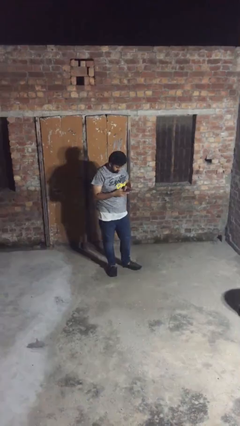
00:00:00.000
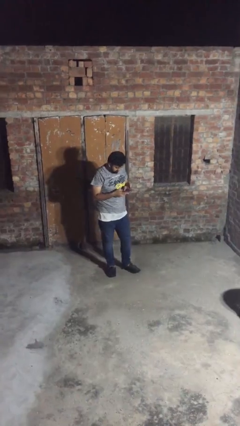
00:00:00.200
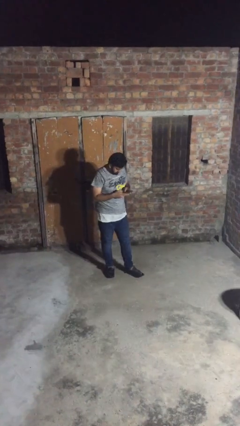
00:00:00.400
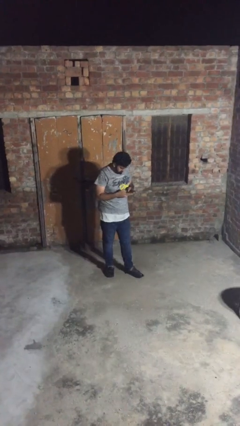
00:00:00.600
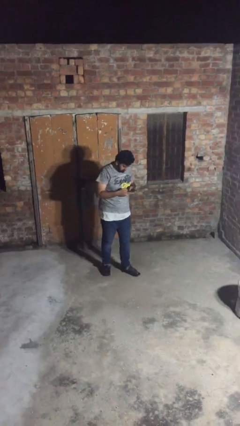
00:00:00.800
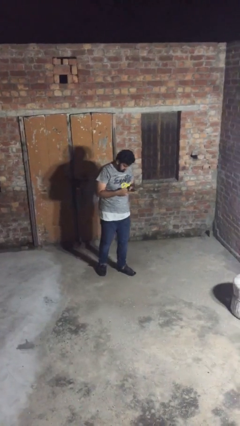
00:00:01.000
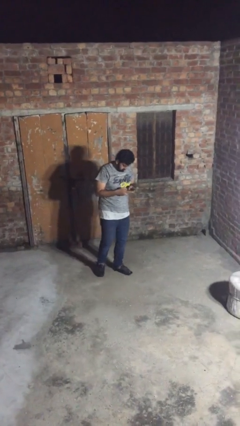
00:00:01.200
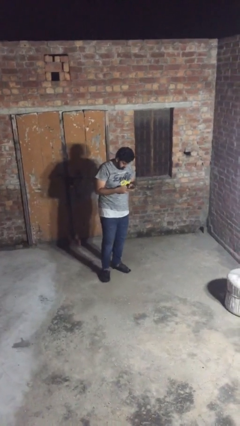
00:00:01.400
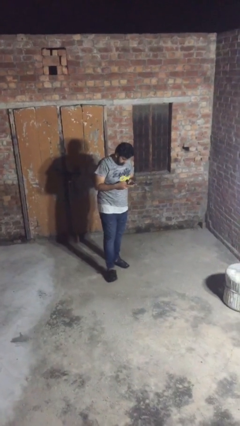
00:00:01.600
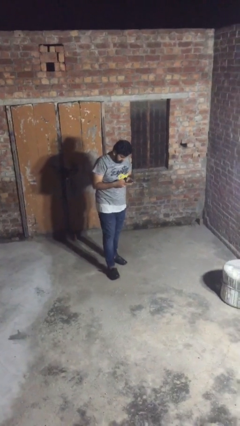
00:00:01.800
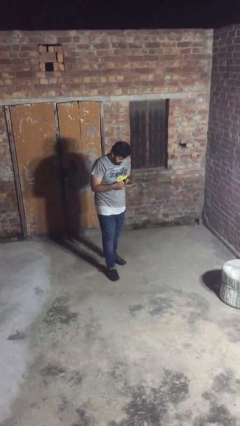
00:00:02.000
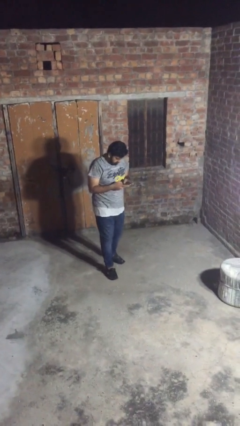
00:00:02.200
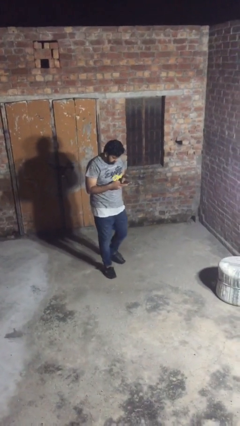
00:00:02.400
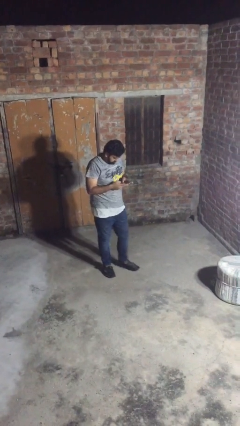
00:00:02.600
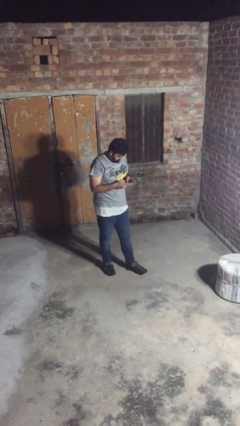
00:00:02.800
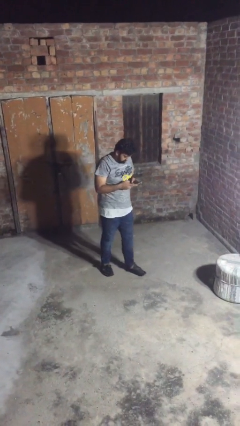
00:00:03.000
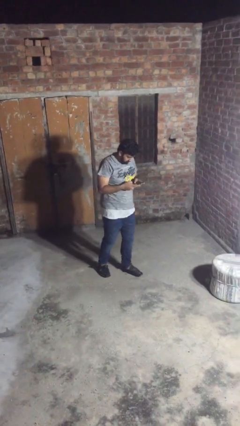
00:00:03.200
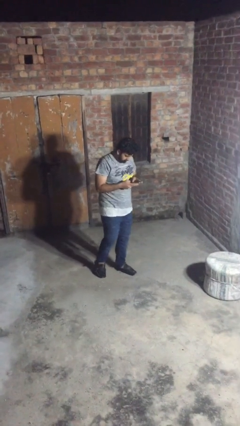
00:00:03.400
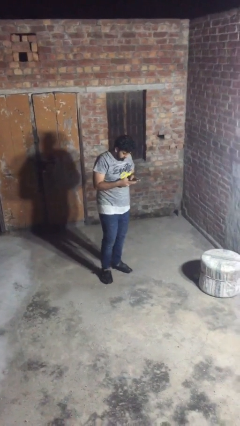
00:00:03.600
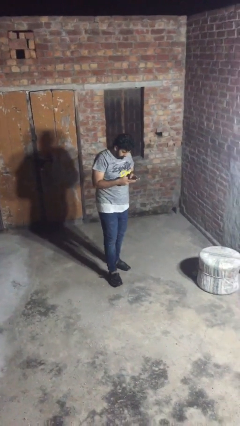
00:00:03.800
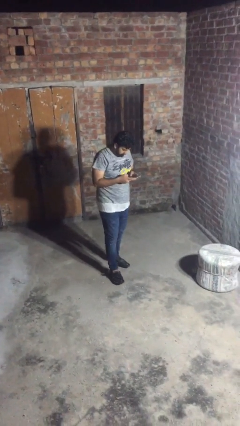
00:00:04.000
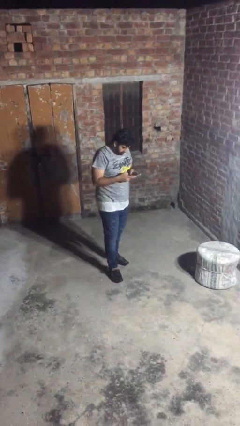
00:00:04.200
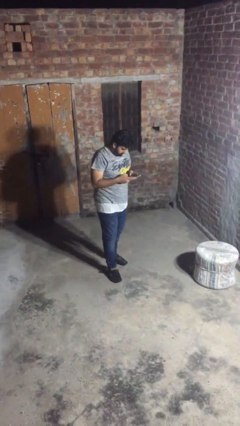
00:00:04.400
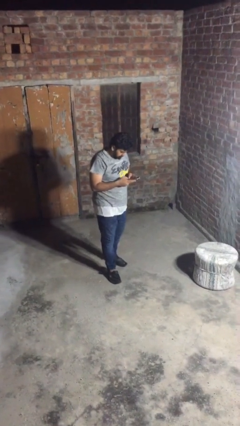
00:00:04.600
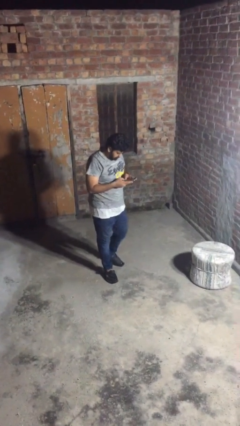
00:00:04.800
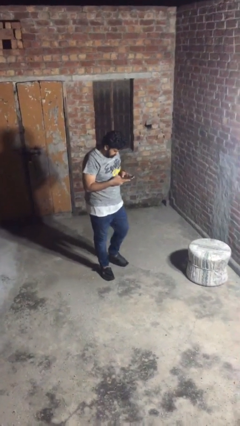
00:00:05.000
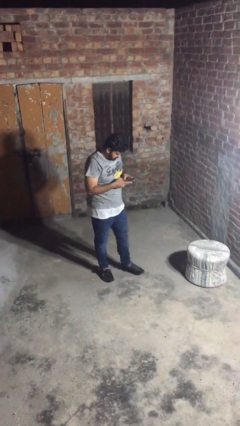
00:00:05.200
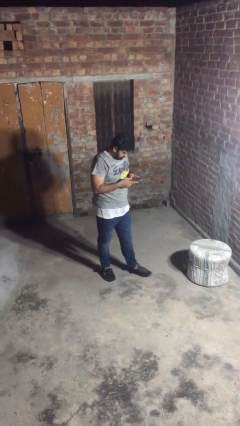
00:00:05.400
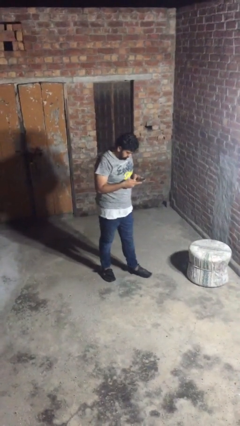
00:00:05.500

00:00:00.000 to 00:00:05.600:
person texts on phone

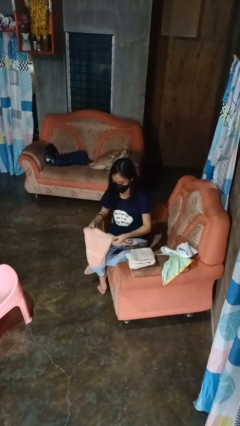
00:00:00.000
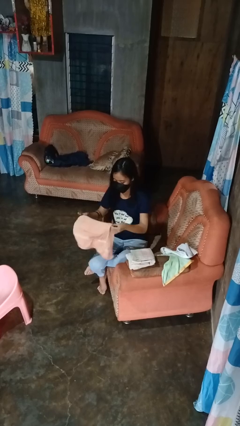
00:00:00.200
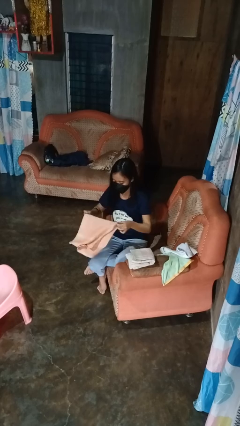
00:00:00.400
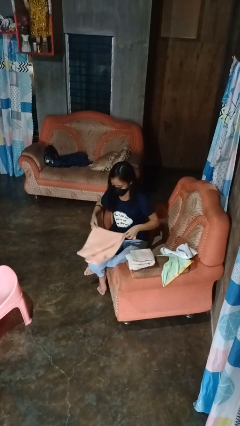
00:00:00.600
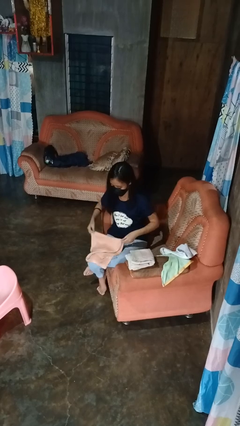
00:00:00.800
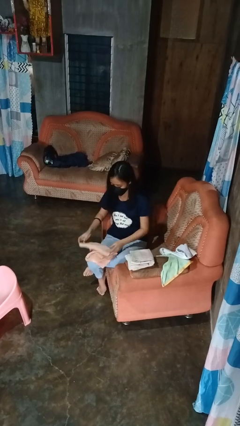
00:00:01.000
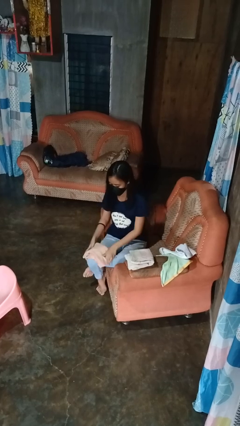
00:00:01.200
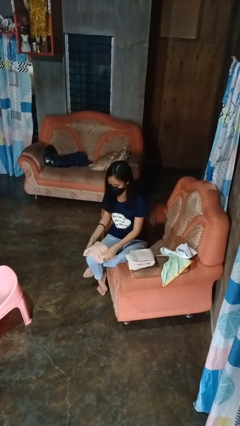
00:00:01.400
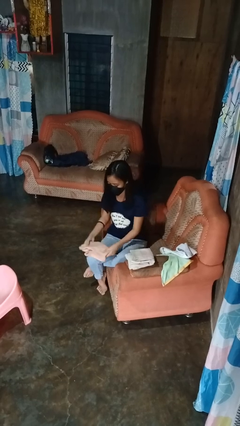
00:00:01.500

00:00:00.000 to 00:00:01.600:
person folds towel

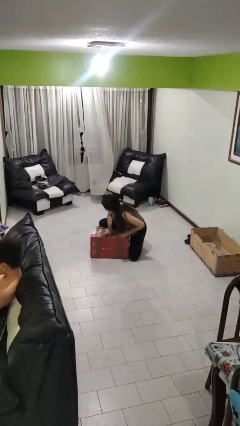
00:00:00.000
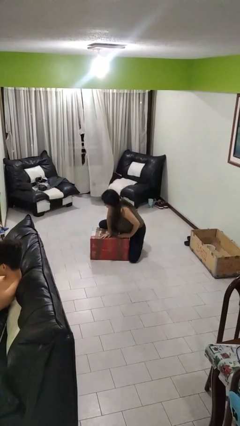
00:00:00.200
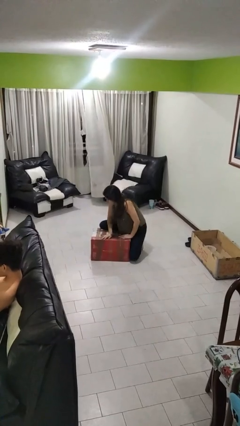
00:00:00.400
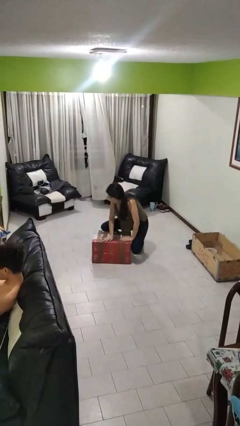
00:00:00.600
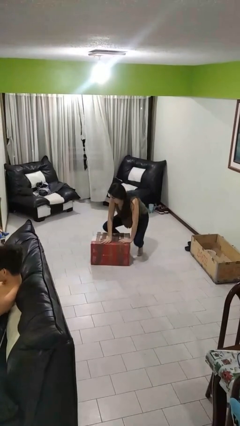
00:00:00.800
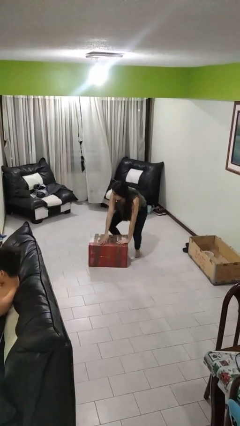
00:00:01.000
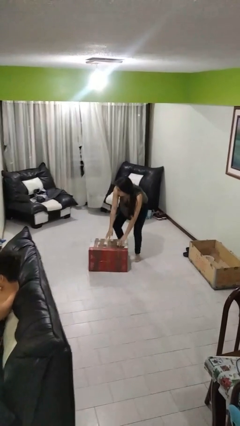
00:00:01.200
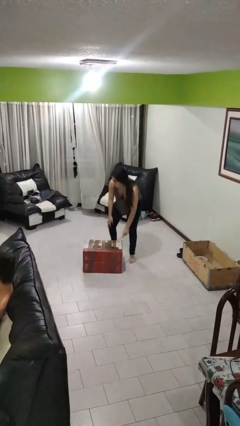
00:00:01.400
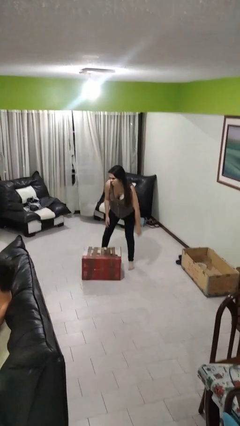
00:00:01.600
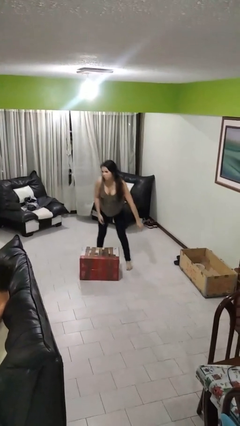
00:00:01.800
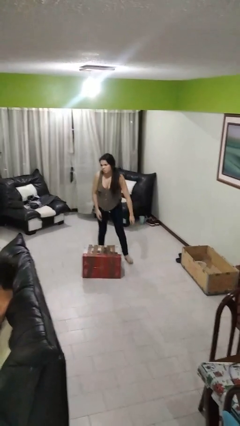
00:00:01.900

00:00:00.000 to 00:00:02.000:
person stands up from floor

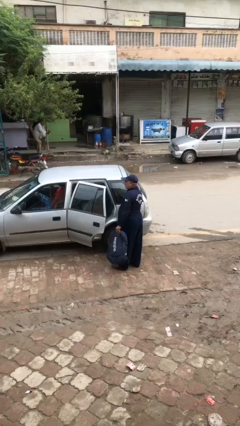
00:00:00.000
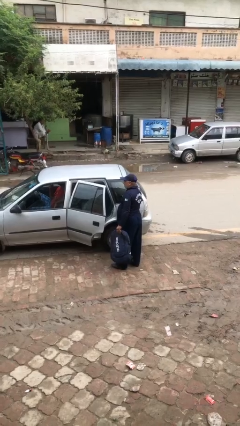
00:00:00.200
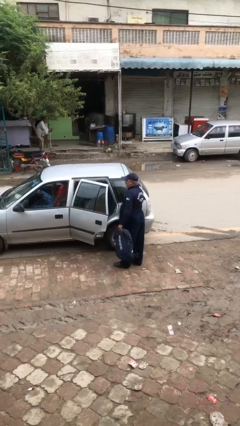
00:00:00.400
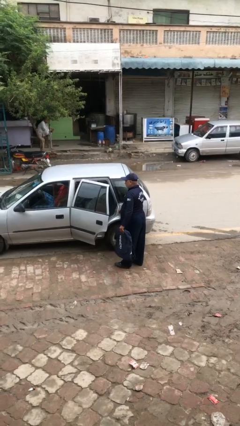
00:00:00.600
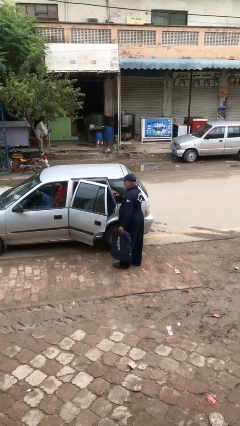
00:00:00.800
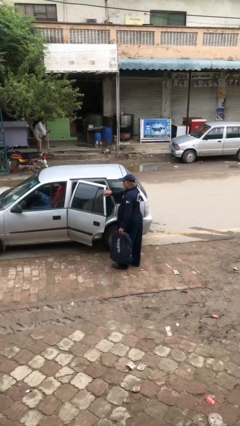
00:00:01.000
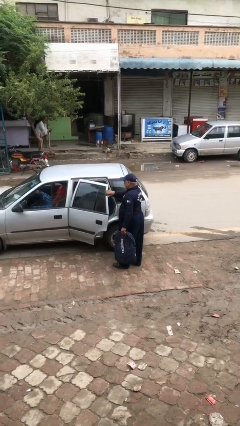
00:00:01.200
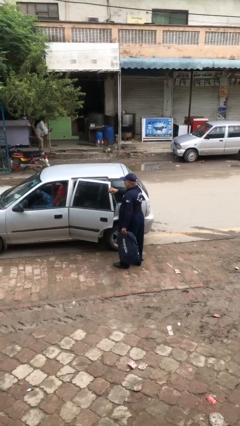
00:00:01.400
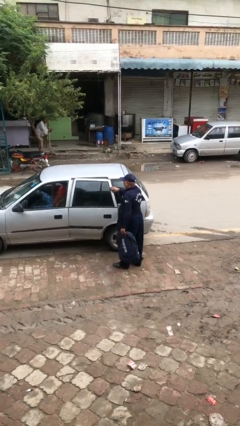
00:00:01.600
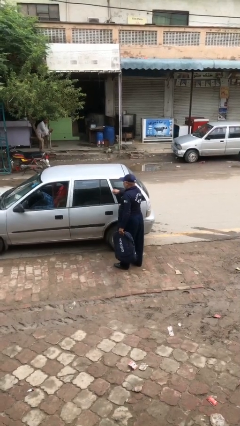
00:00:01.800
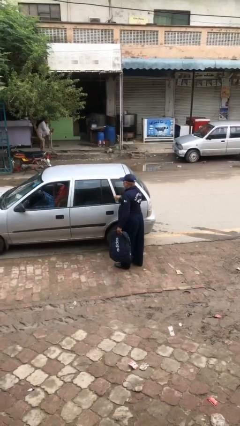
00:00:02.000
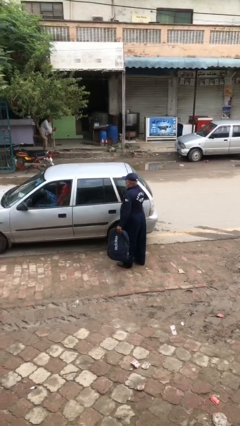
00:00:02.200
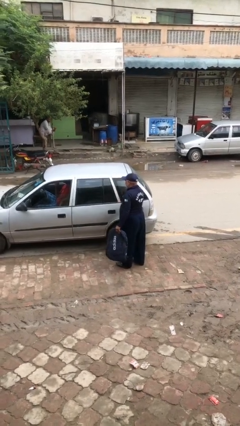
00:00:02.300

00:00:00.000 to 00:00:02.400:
person closes car door

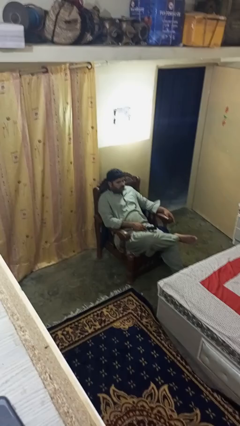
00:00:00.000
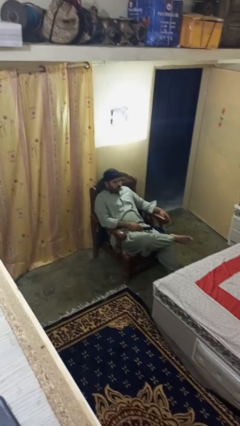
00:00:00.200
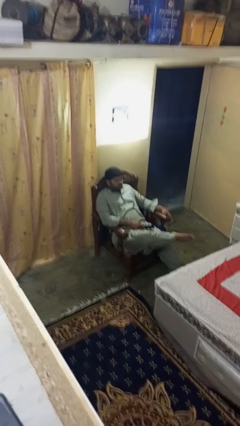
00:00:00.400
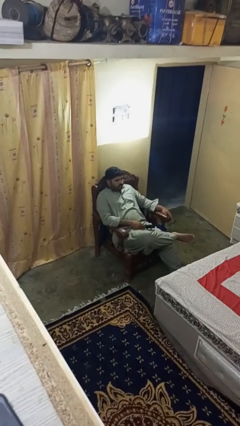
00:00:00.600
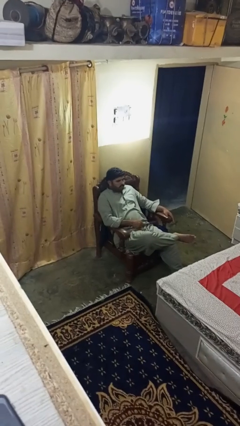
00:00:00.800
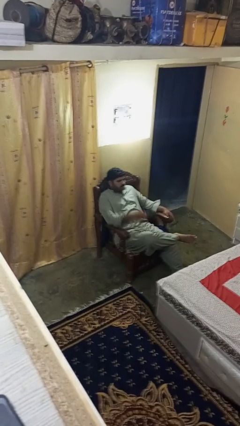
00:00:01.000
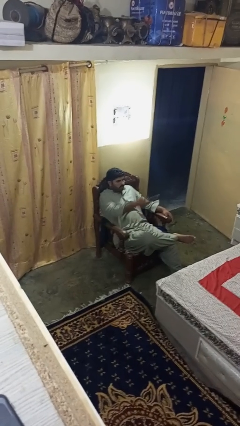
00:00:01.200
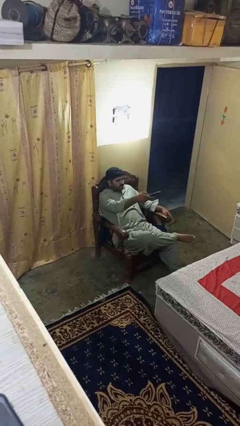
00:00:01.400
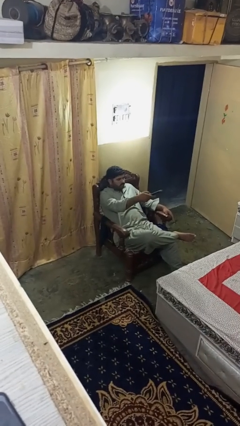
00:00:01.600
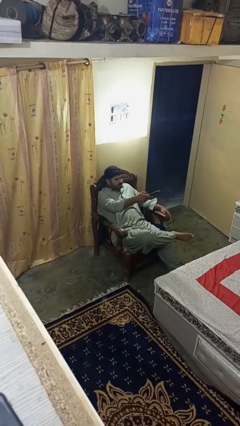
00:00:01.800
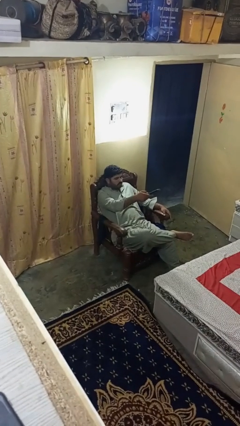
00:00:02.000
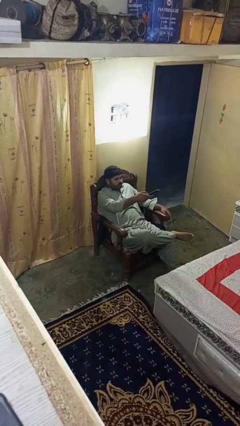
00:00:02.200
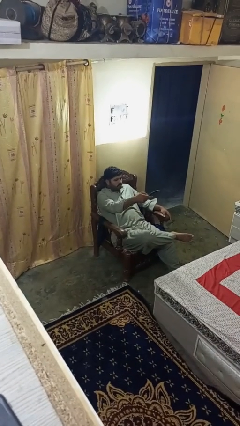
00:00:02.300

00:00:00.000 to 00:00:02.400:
person uses television remote

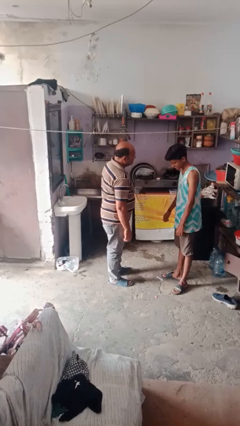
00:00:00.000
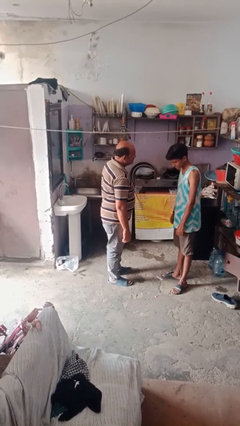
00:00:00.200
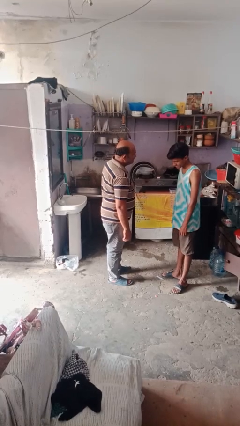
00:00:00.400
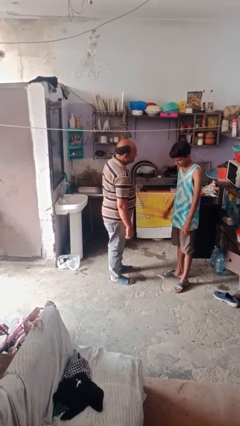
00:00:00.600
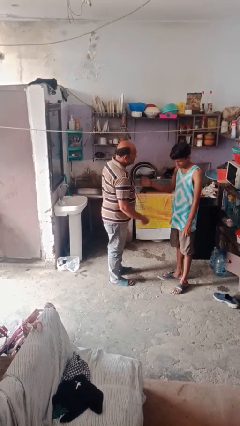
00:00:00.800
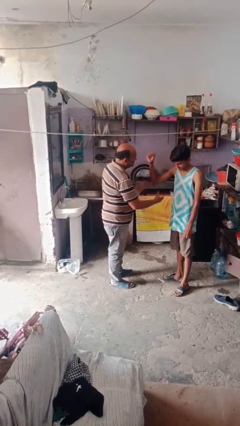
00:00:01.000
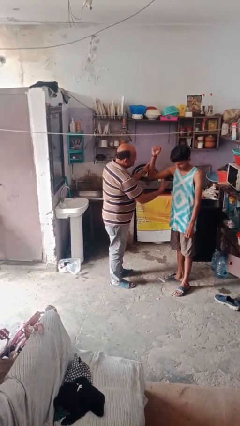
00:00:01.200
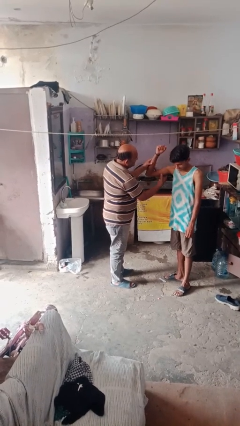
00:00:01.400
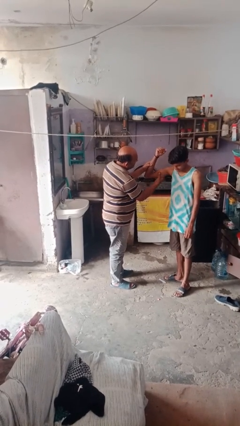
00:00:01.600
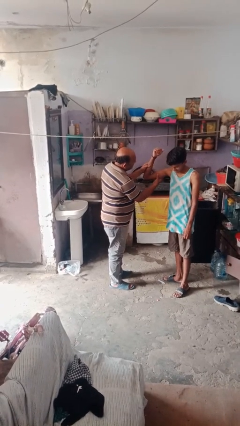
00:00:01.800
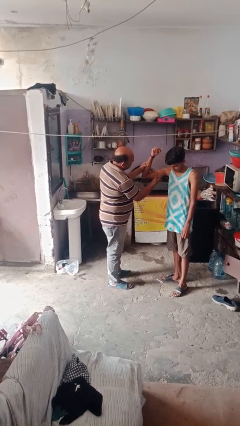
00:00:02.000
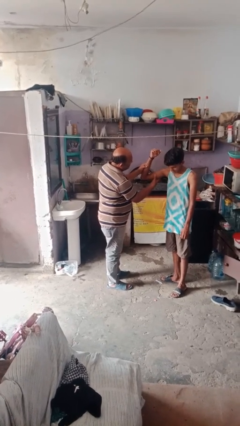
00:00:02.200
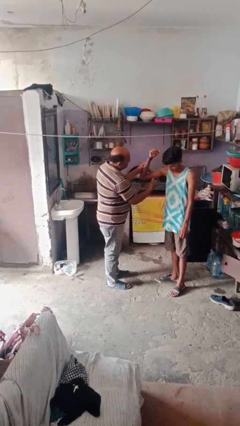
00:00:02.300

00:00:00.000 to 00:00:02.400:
person grabs person by bicep

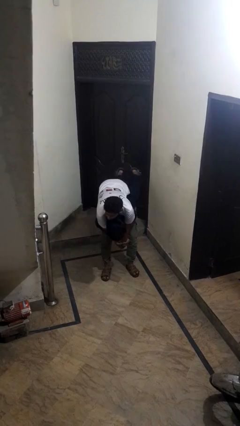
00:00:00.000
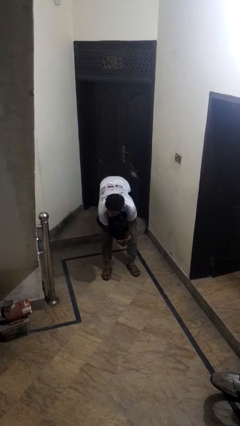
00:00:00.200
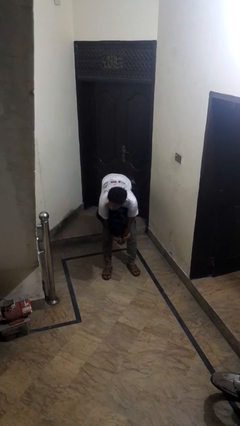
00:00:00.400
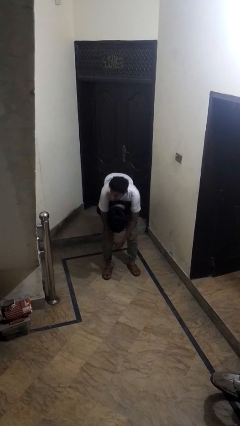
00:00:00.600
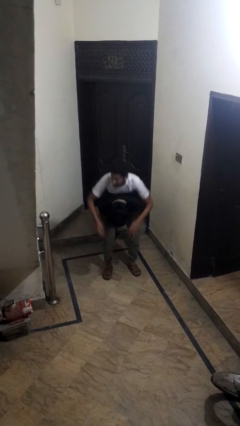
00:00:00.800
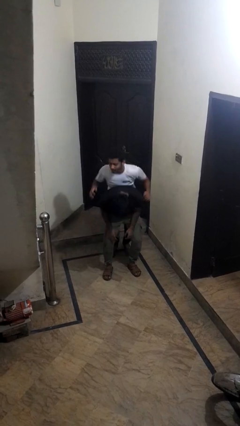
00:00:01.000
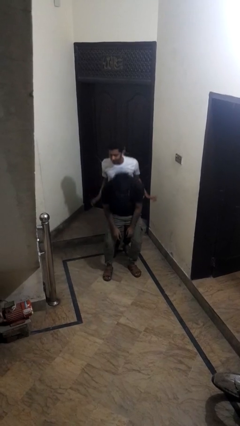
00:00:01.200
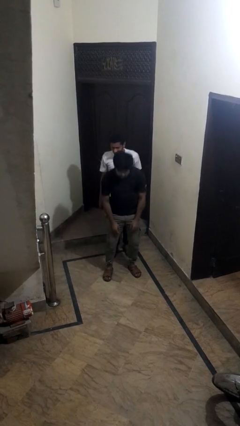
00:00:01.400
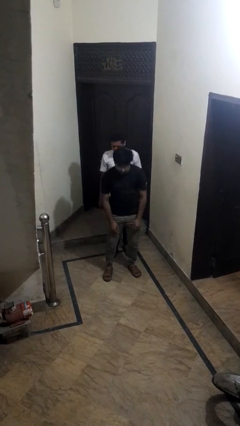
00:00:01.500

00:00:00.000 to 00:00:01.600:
person puts down person
